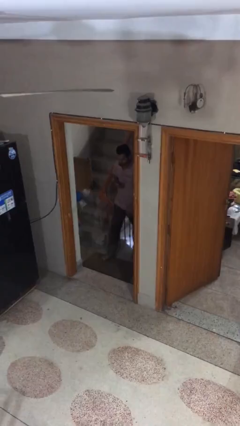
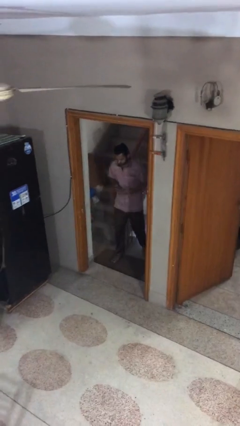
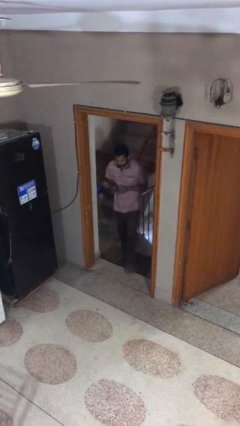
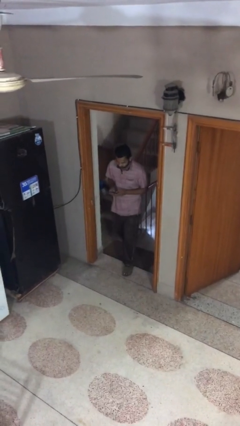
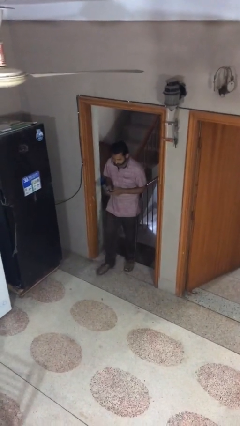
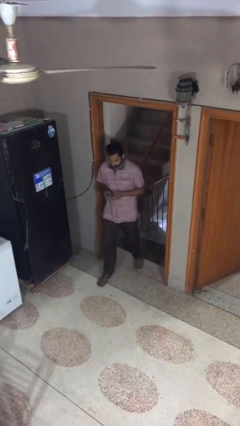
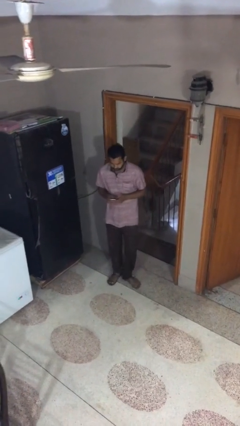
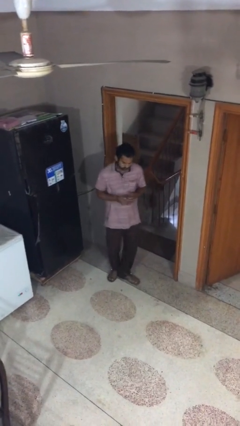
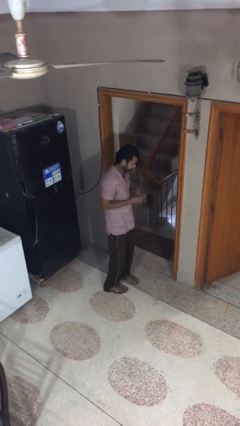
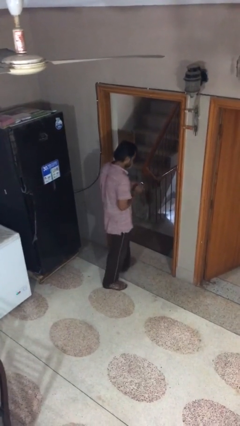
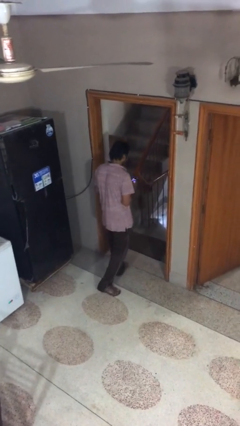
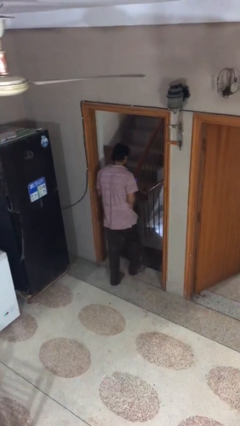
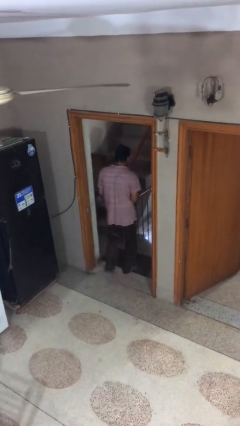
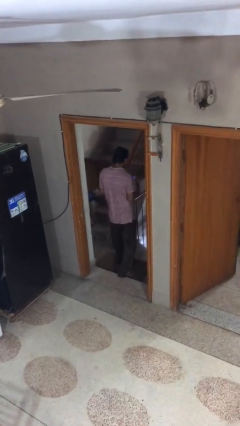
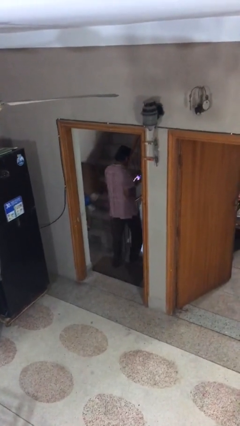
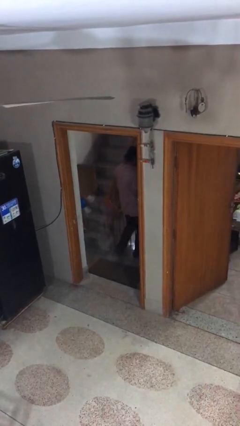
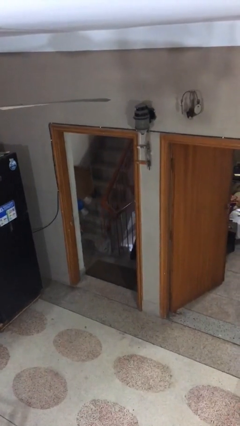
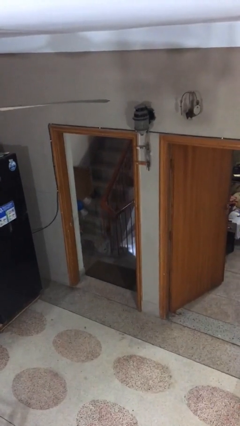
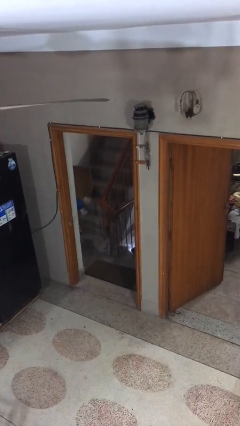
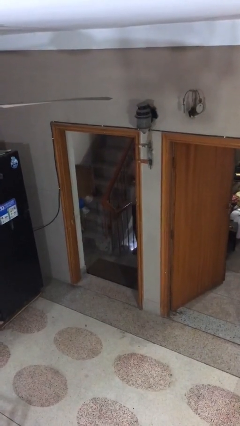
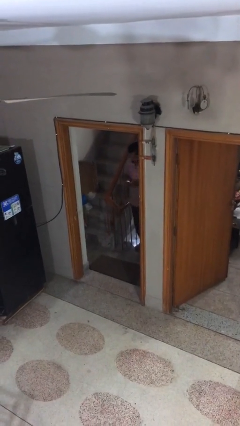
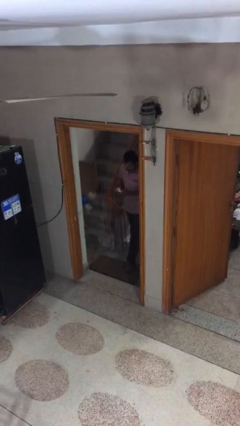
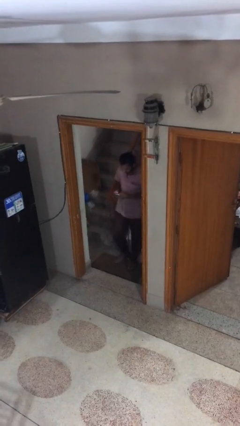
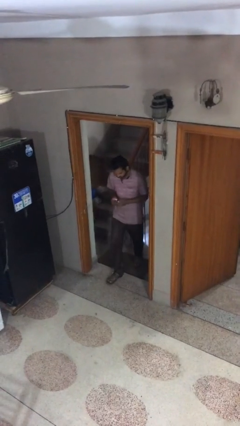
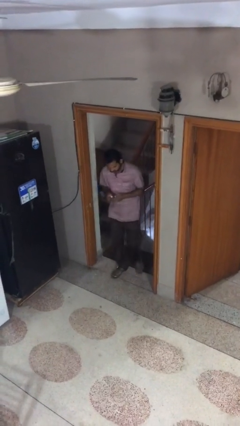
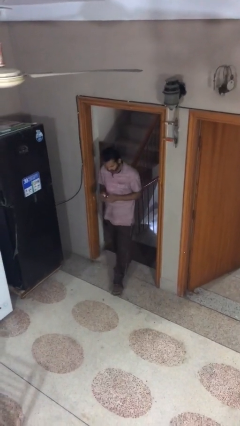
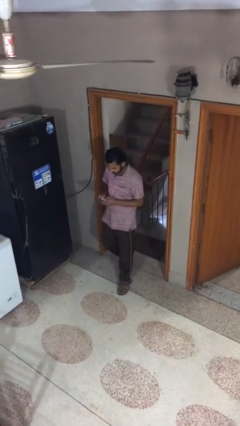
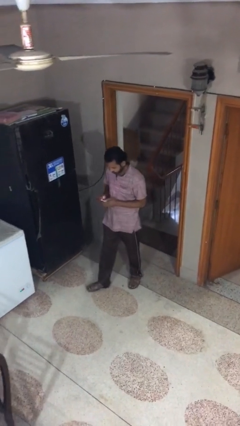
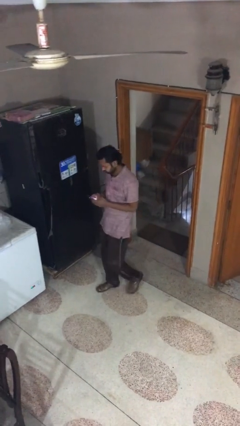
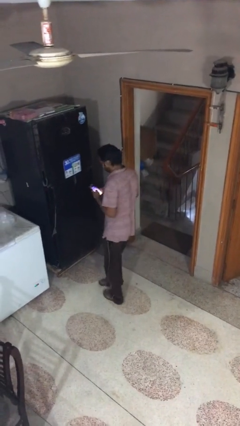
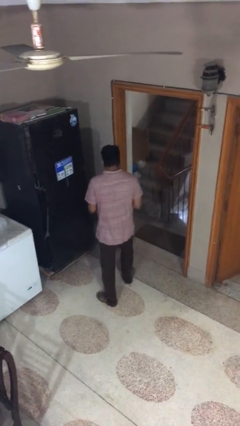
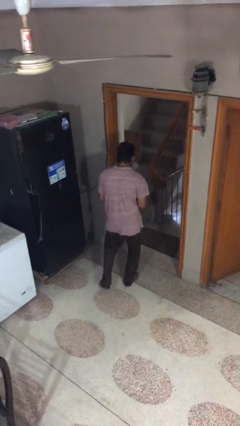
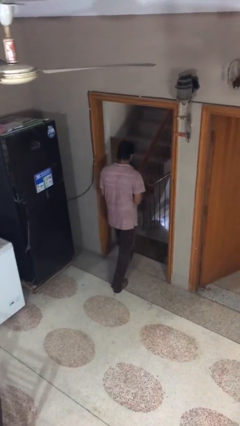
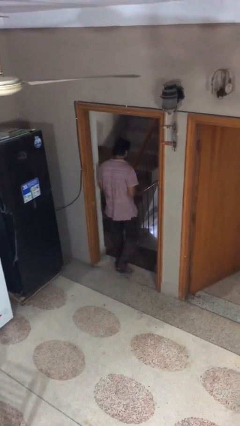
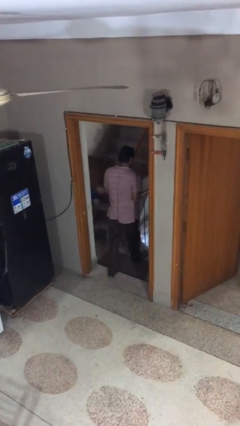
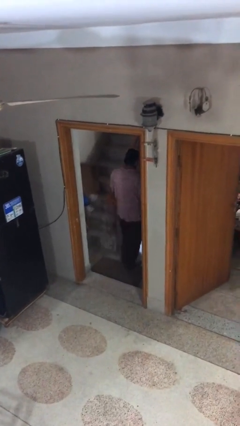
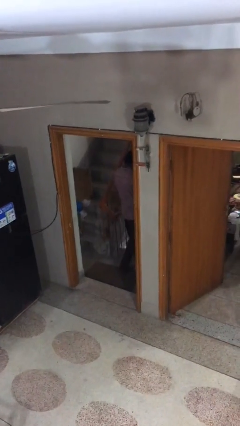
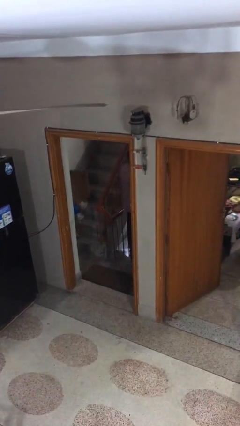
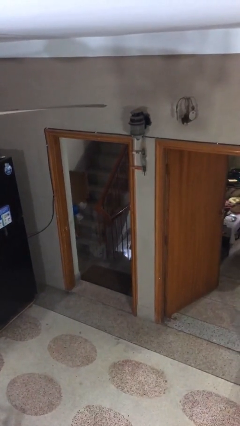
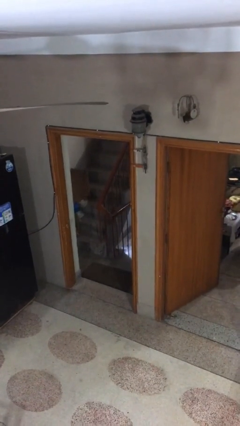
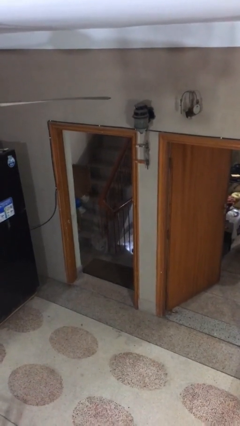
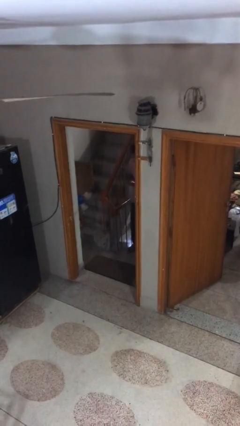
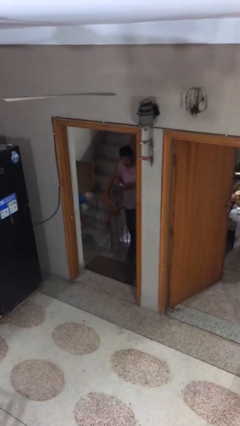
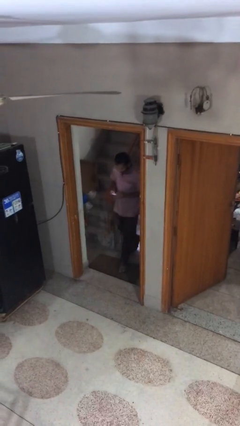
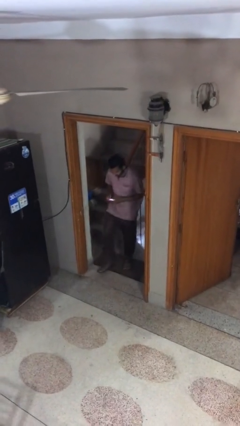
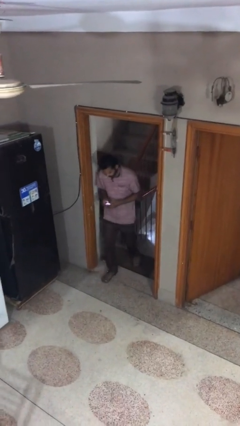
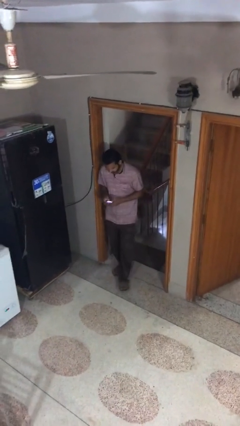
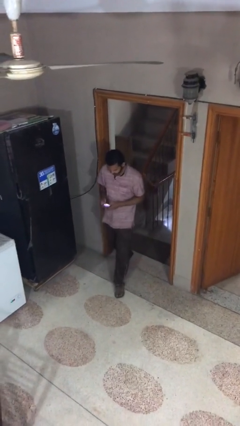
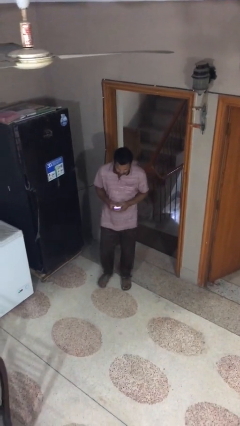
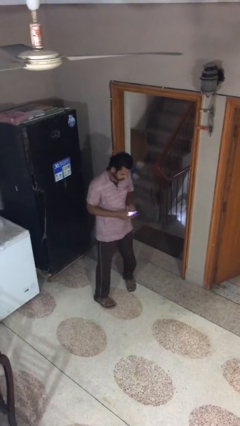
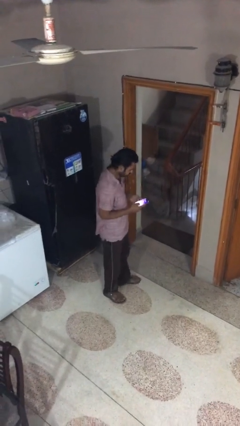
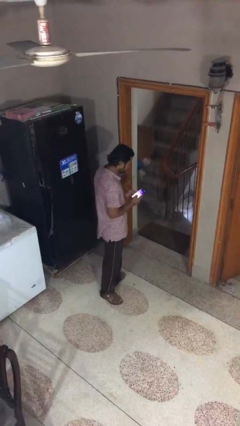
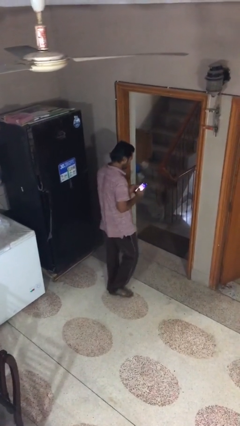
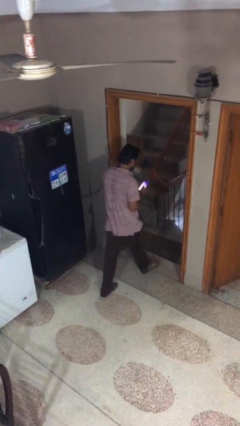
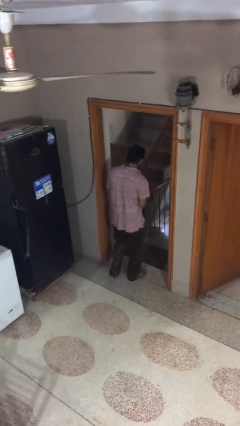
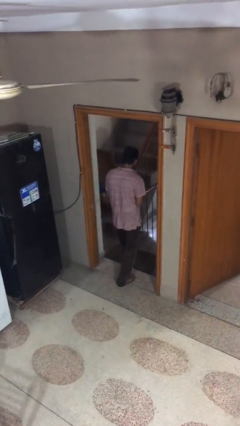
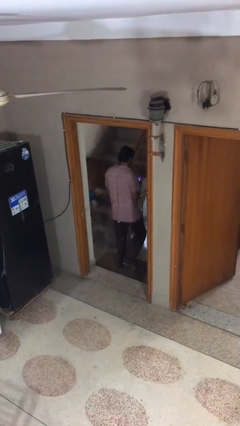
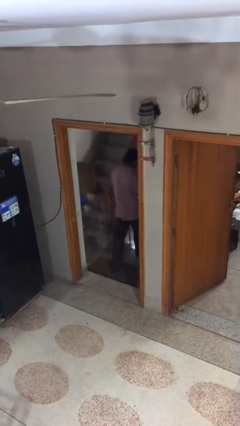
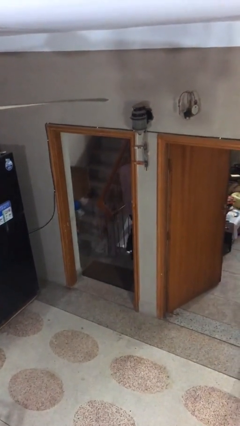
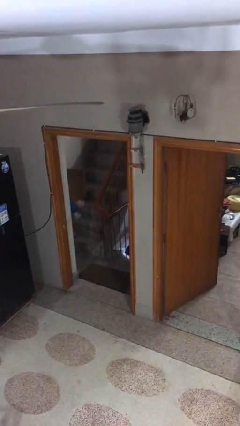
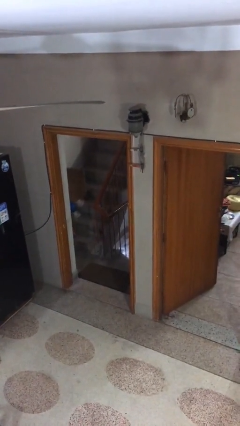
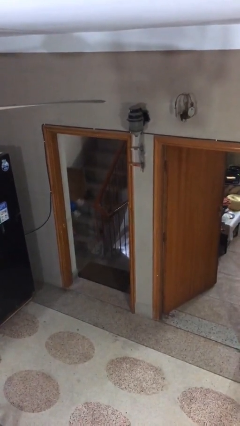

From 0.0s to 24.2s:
person texts on phone

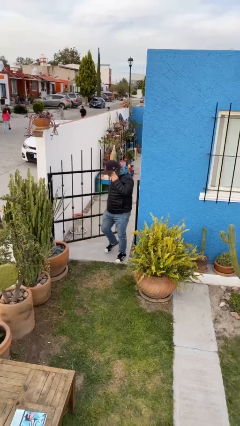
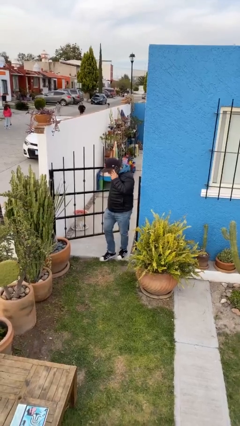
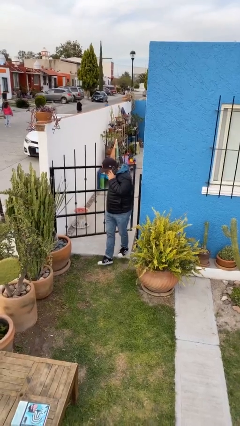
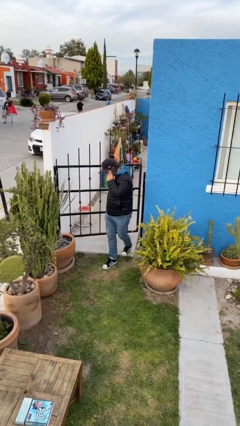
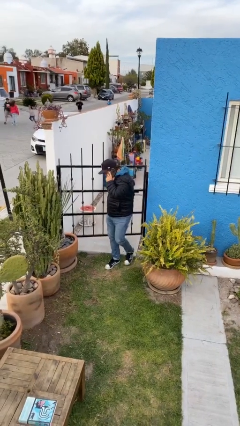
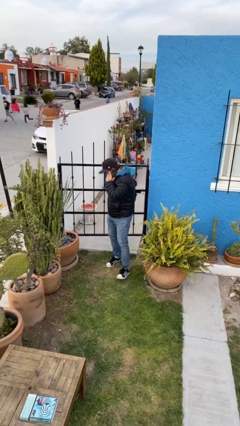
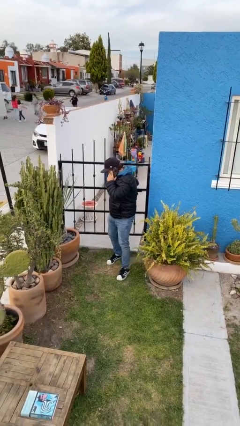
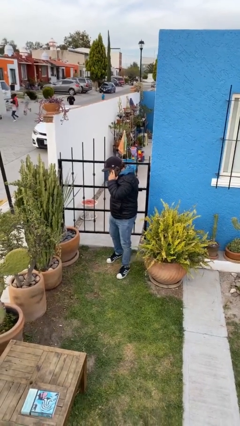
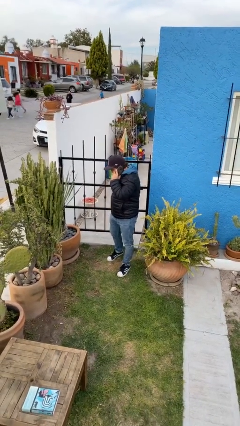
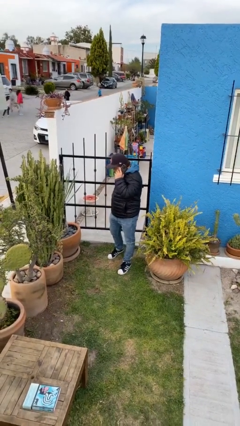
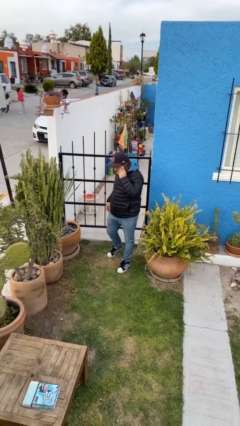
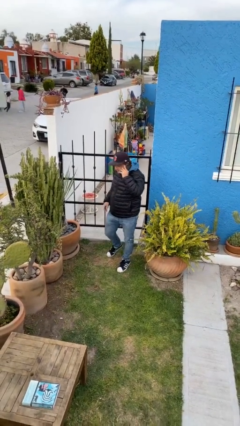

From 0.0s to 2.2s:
person closes facility door

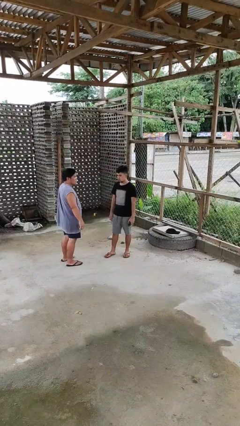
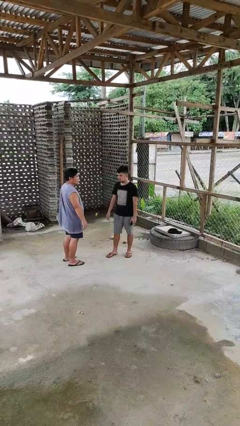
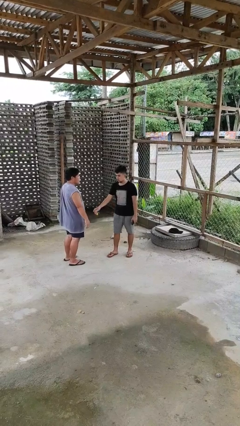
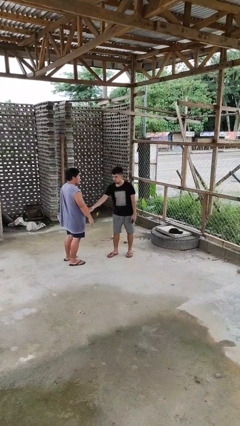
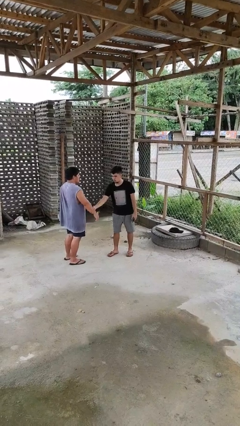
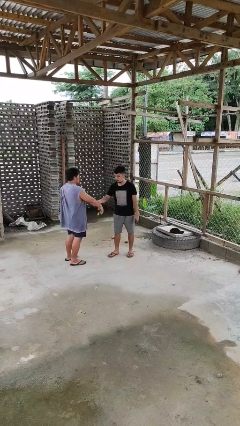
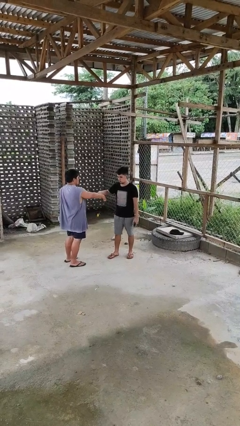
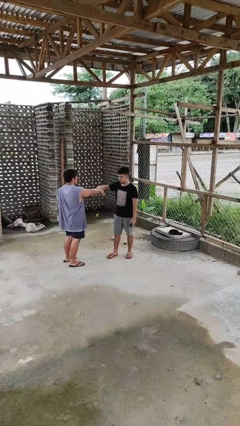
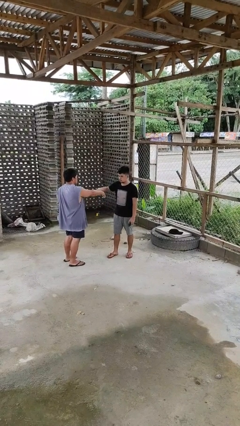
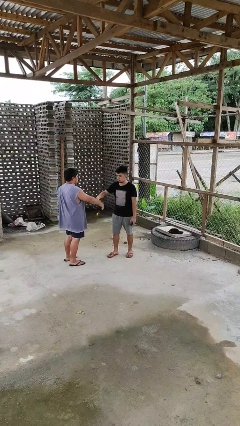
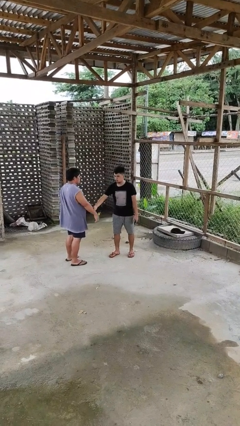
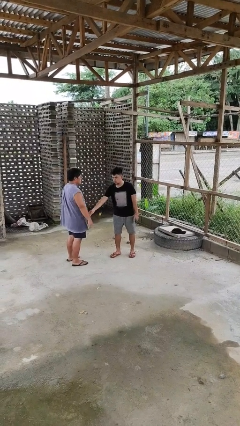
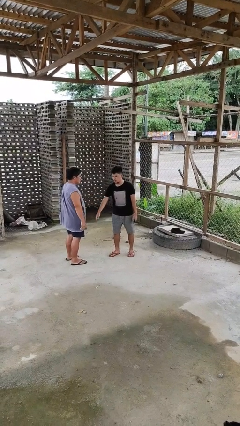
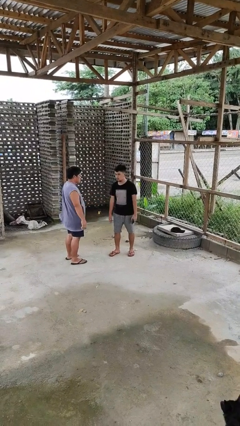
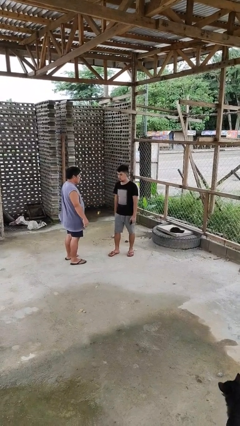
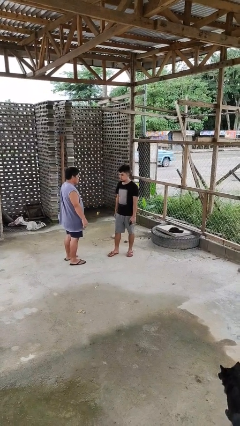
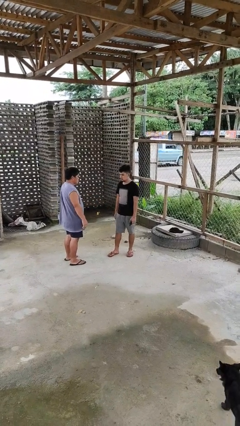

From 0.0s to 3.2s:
person grabs person by forearm

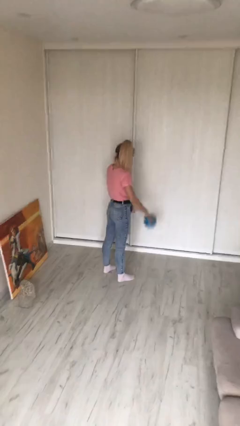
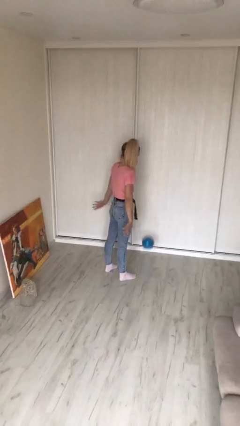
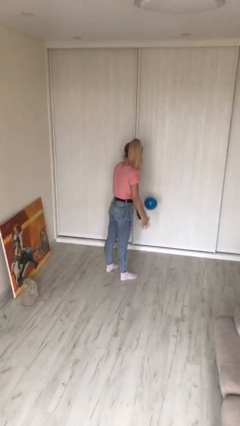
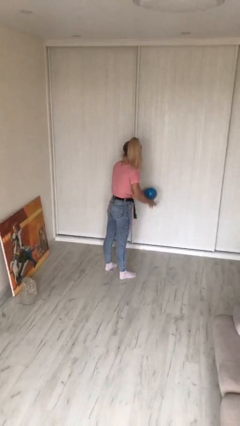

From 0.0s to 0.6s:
person bounces ball on floor
